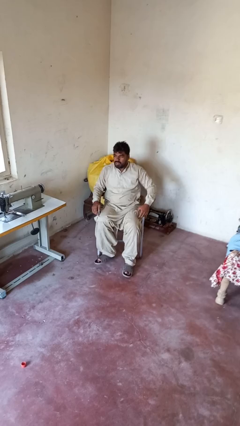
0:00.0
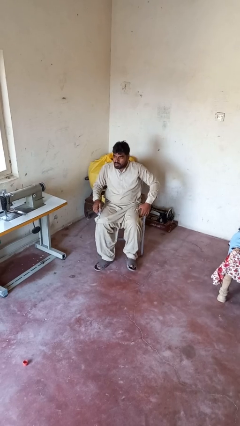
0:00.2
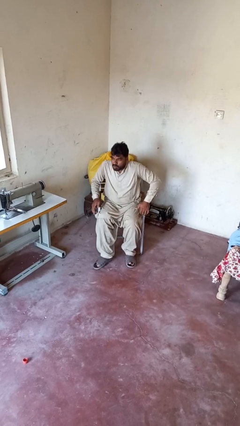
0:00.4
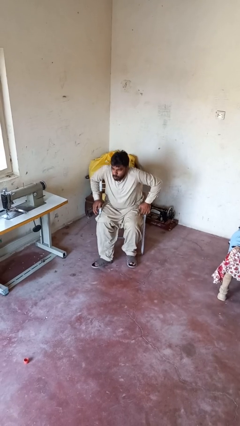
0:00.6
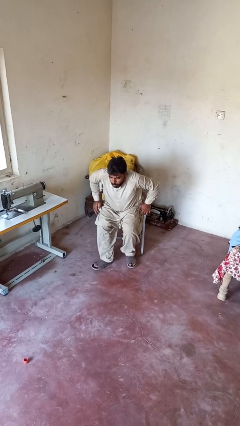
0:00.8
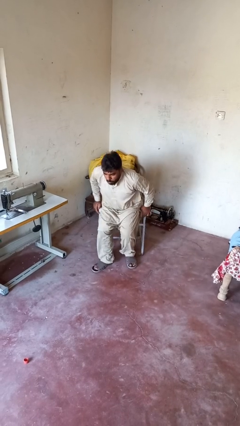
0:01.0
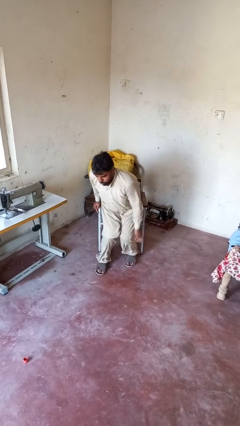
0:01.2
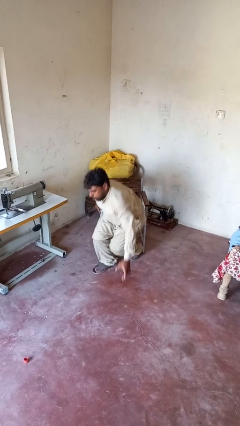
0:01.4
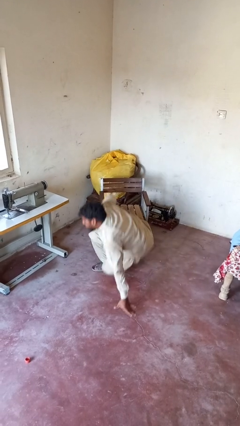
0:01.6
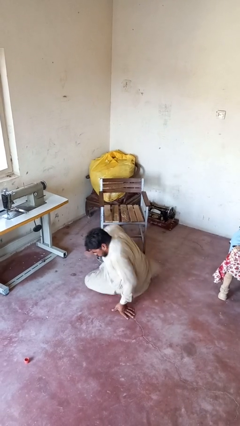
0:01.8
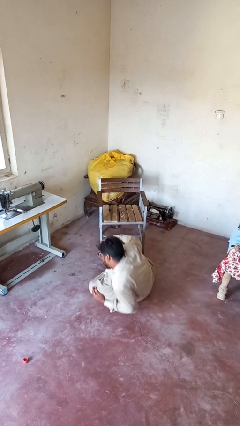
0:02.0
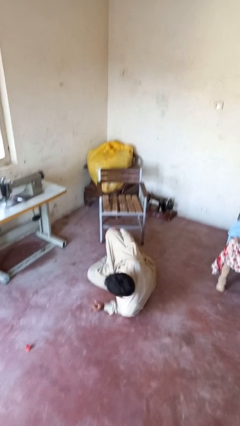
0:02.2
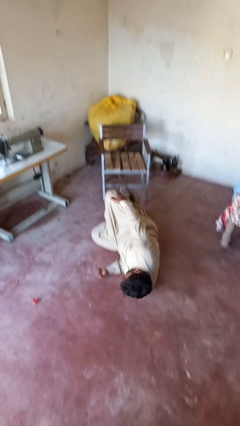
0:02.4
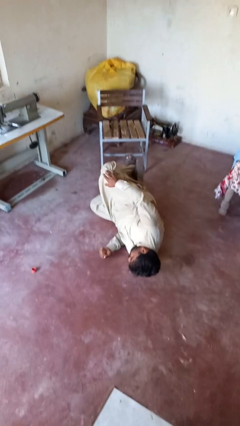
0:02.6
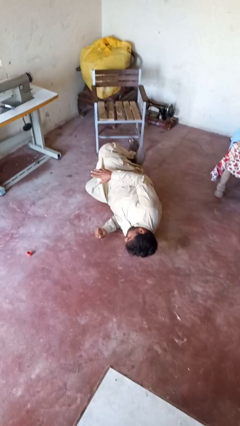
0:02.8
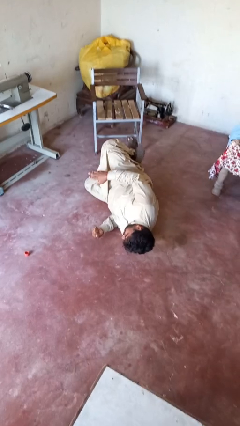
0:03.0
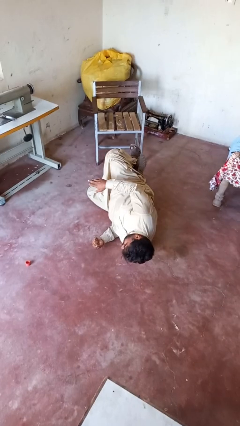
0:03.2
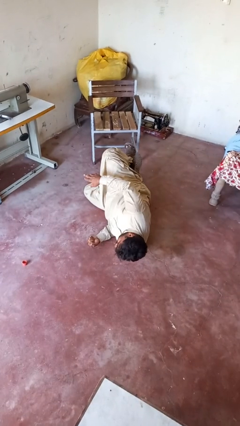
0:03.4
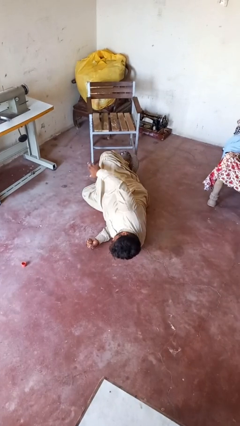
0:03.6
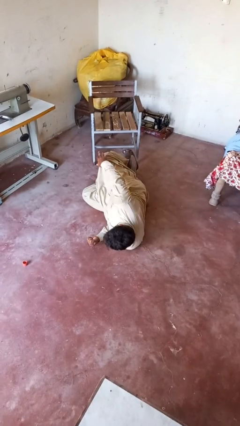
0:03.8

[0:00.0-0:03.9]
person falls from chair

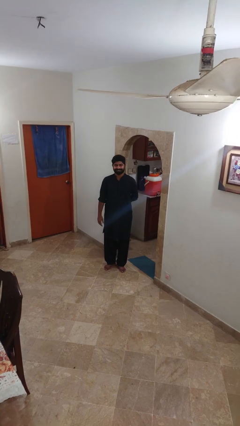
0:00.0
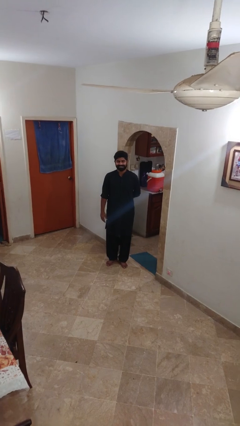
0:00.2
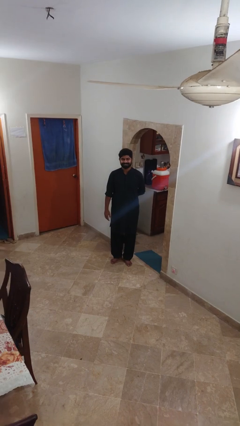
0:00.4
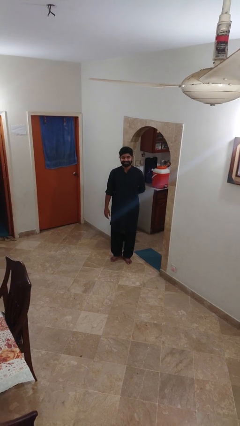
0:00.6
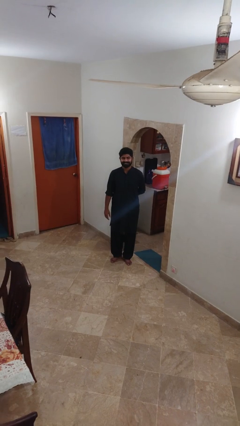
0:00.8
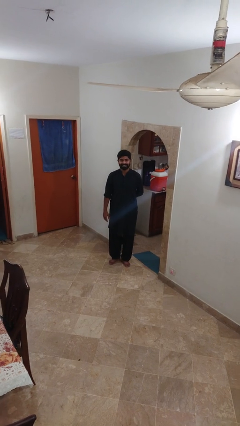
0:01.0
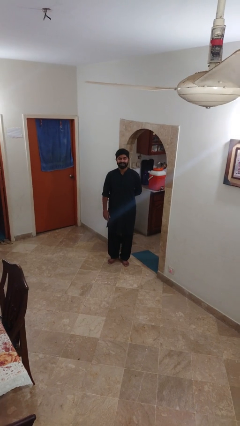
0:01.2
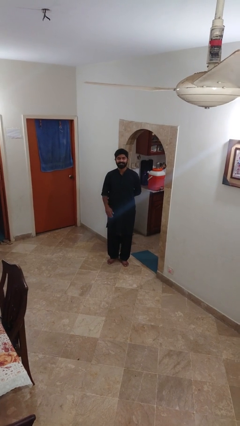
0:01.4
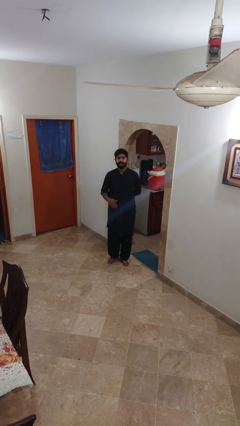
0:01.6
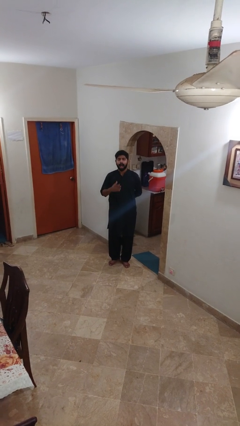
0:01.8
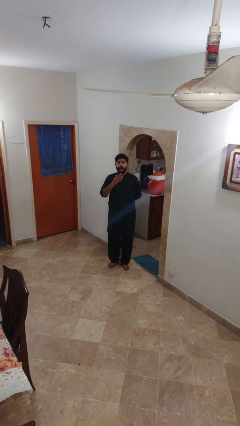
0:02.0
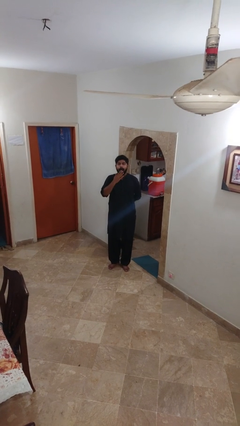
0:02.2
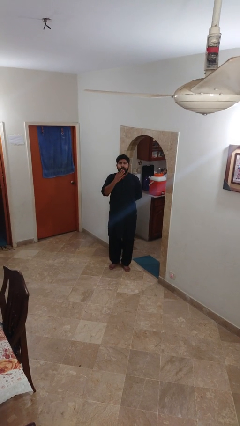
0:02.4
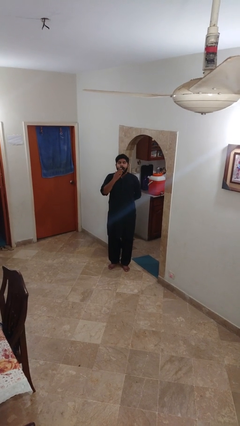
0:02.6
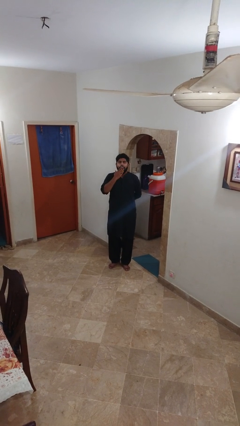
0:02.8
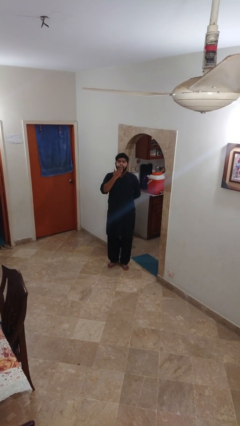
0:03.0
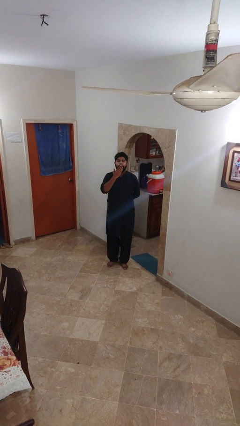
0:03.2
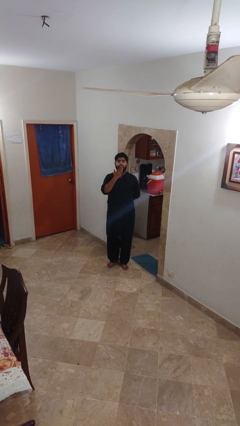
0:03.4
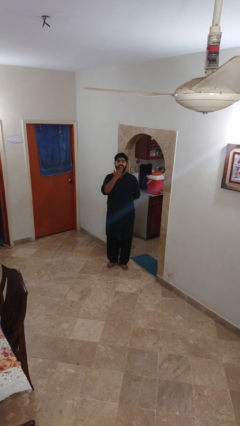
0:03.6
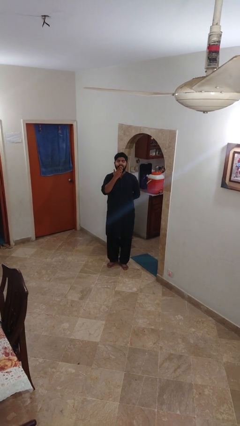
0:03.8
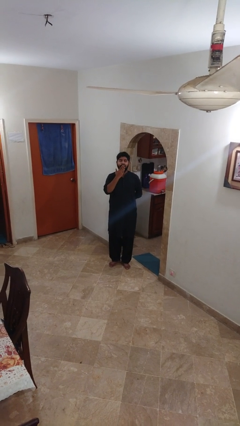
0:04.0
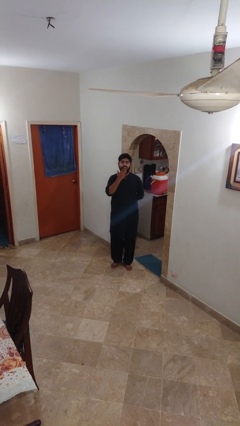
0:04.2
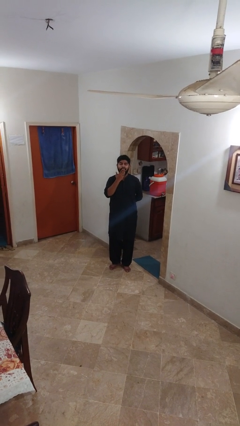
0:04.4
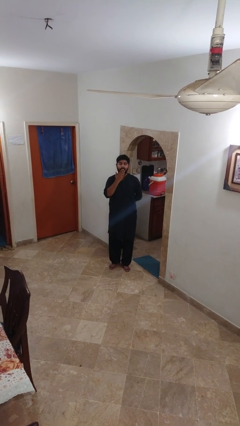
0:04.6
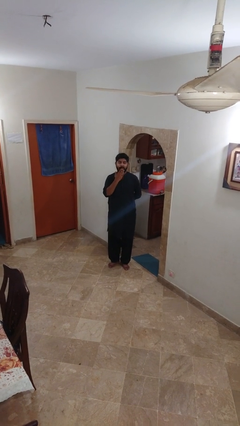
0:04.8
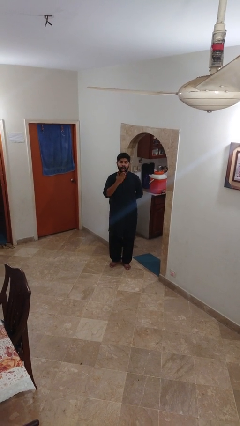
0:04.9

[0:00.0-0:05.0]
person yawns

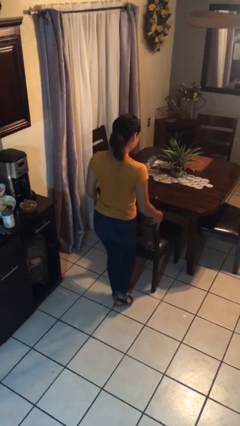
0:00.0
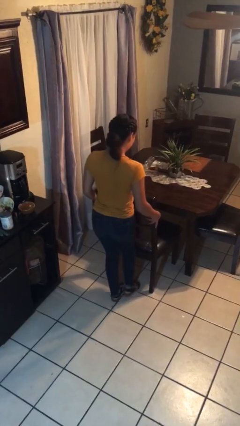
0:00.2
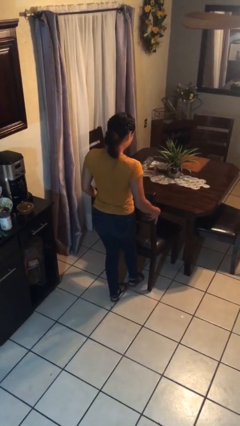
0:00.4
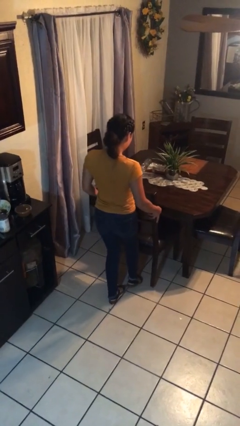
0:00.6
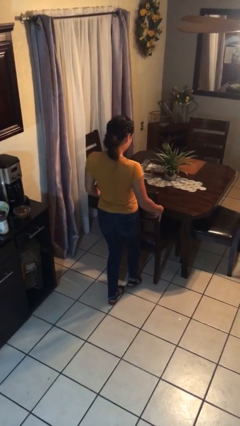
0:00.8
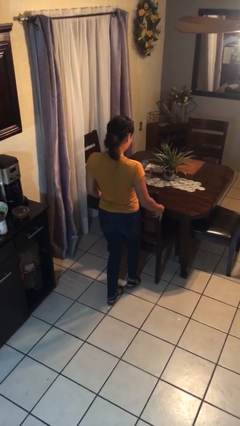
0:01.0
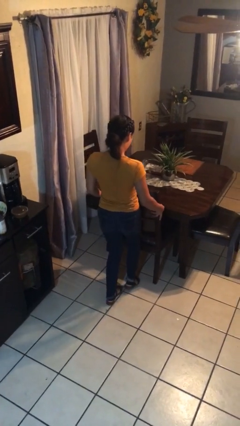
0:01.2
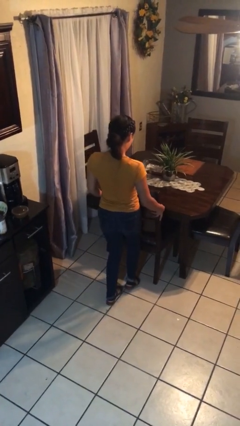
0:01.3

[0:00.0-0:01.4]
person pushes in chair

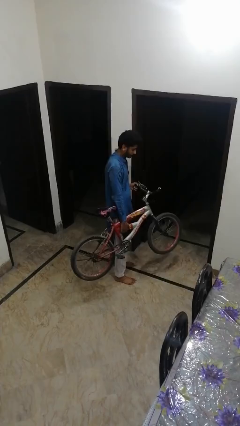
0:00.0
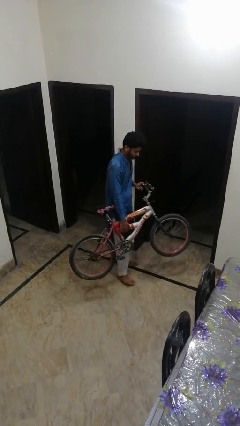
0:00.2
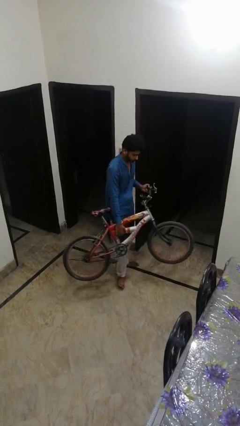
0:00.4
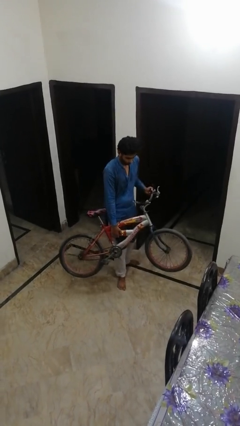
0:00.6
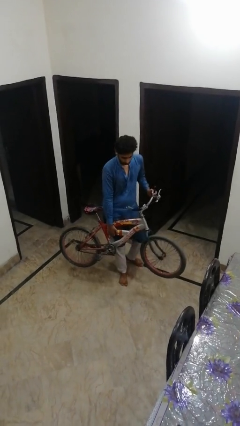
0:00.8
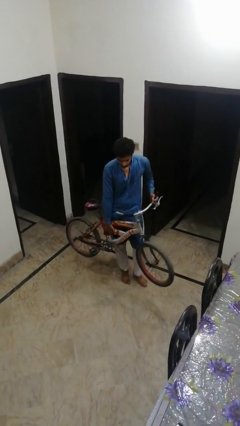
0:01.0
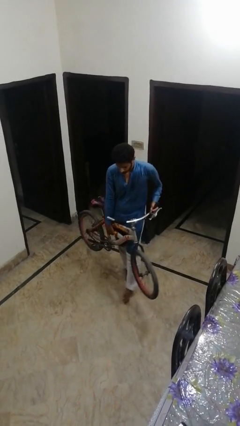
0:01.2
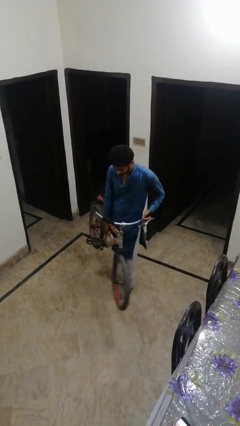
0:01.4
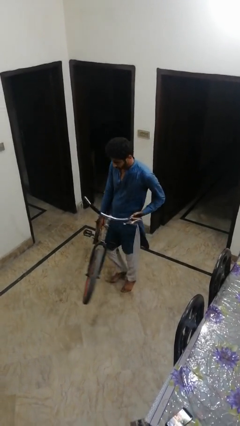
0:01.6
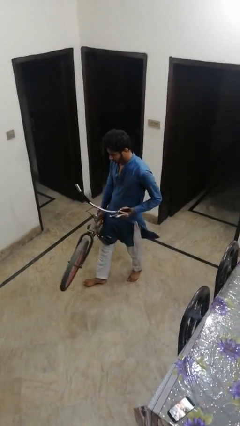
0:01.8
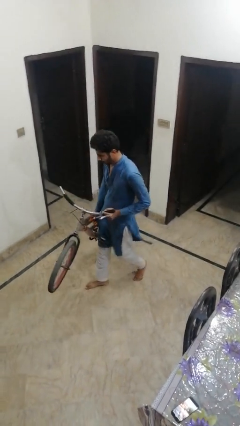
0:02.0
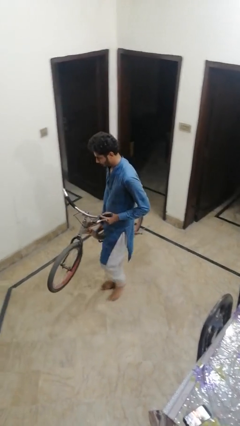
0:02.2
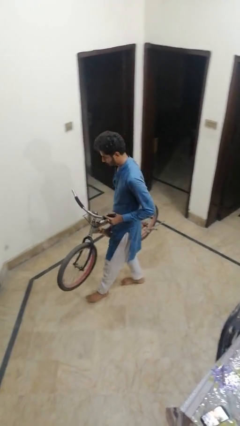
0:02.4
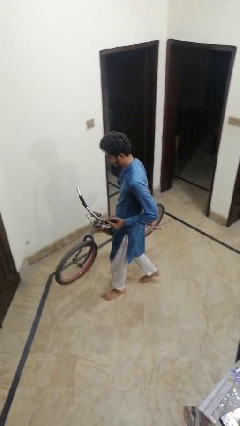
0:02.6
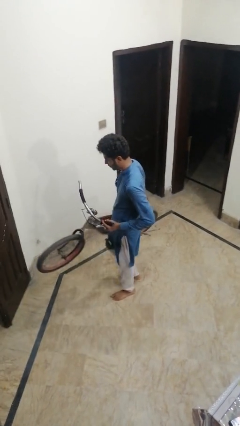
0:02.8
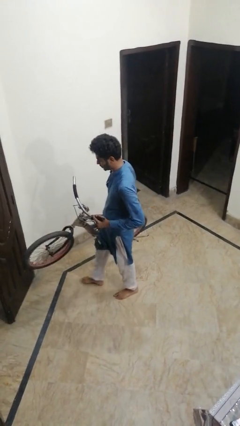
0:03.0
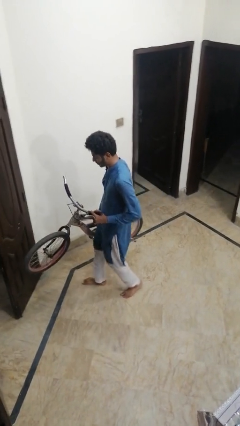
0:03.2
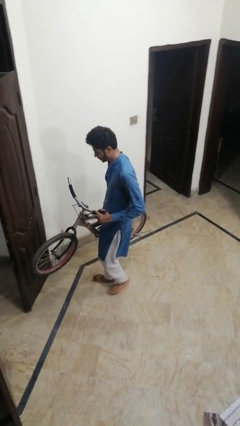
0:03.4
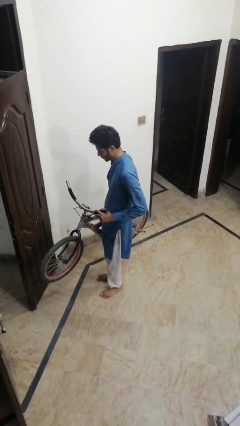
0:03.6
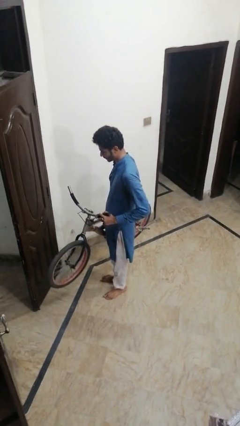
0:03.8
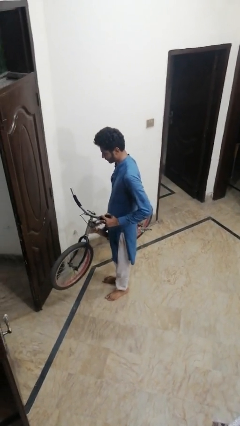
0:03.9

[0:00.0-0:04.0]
person carries bicycle

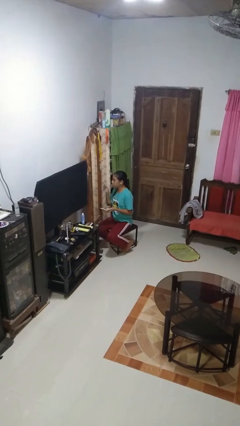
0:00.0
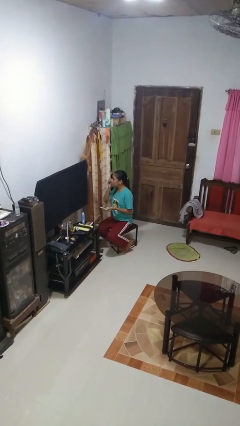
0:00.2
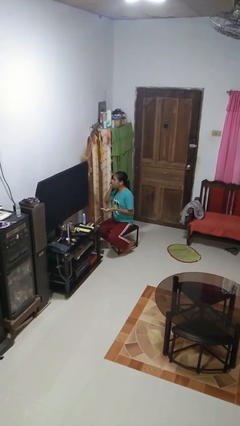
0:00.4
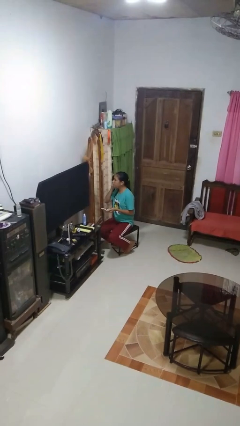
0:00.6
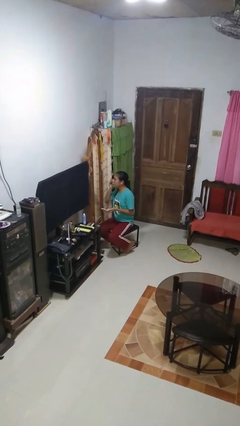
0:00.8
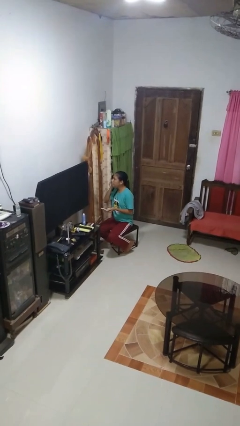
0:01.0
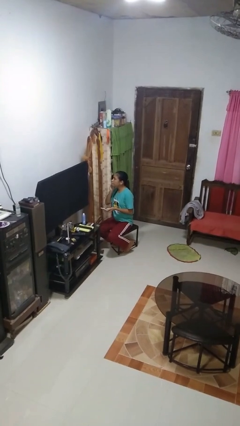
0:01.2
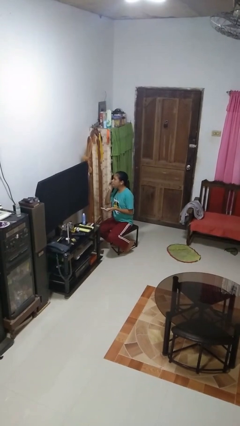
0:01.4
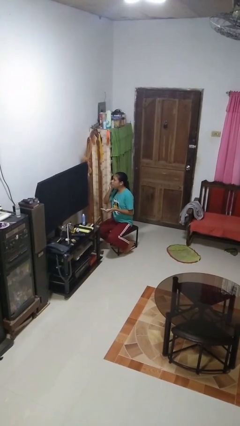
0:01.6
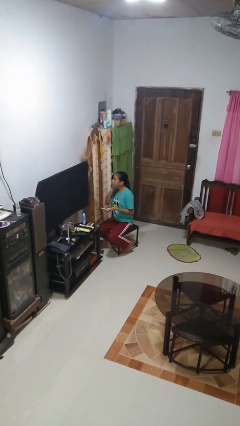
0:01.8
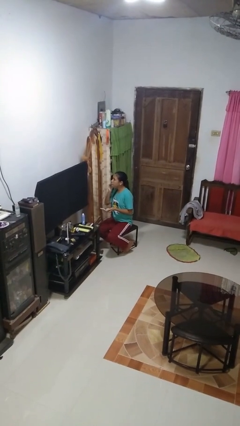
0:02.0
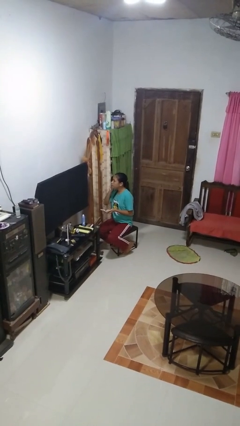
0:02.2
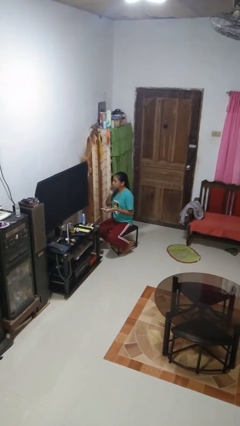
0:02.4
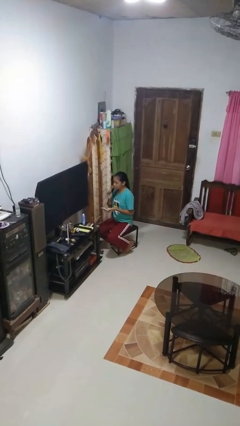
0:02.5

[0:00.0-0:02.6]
person applies foundation makeup

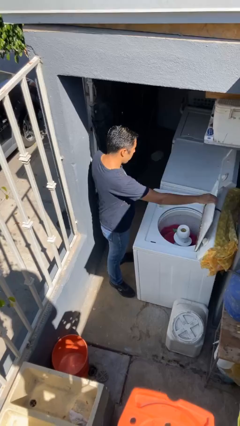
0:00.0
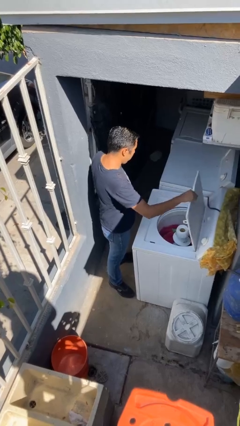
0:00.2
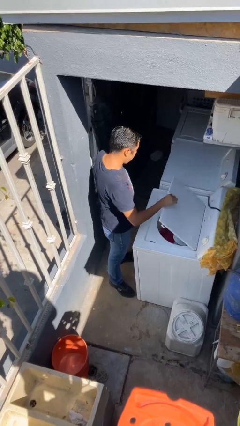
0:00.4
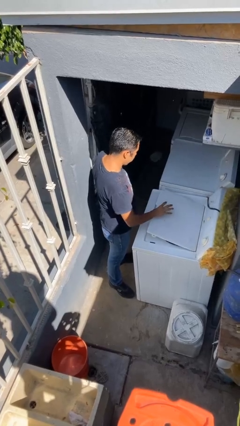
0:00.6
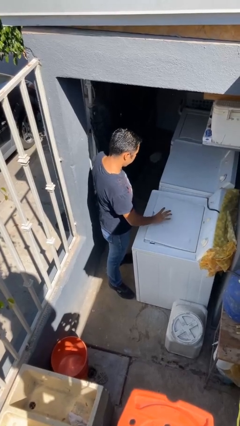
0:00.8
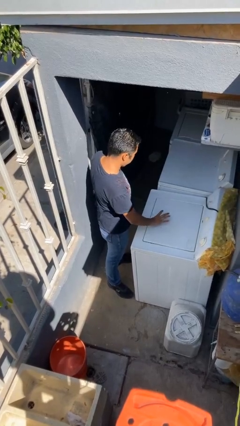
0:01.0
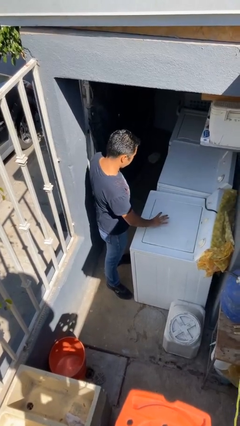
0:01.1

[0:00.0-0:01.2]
person closes clothes washer
